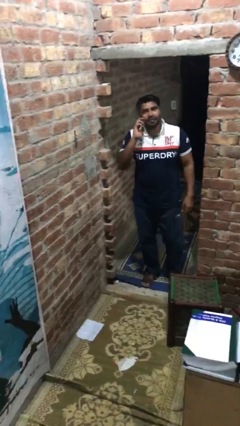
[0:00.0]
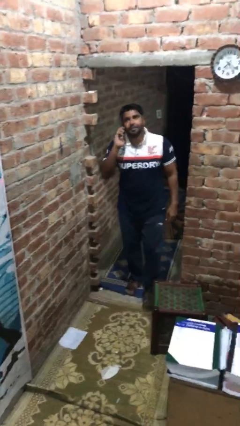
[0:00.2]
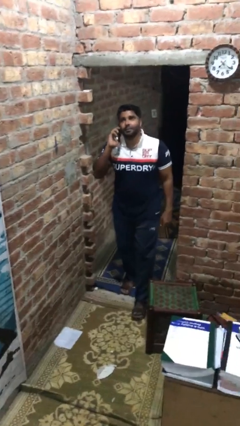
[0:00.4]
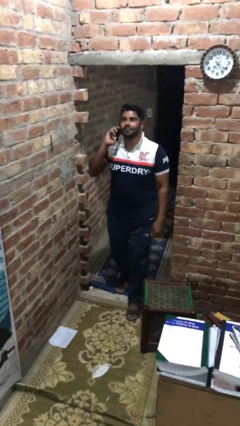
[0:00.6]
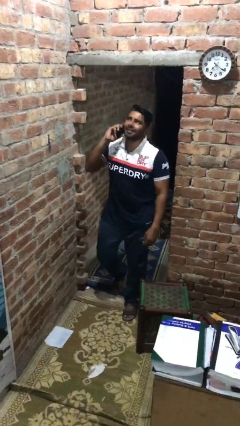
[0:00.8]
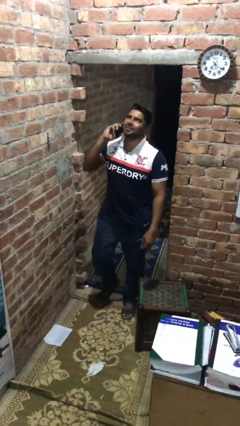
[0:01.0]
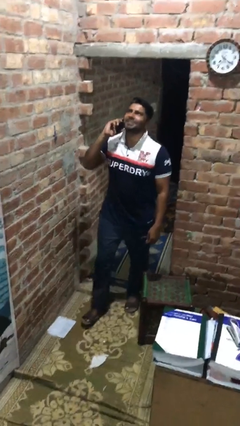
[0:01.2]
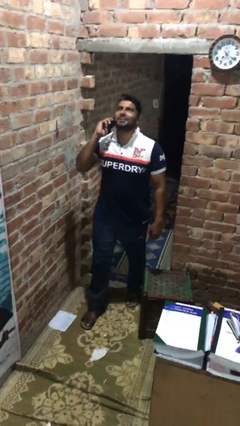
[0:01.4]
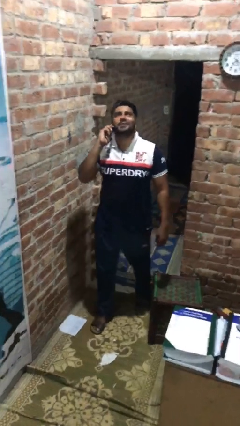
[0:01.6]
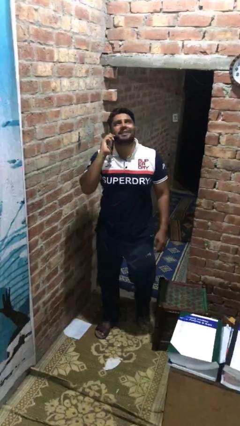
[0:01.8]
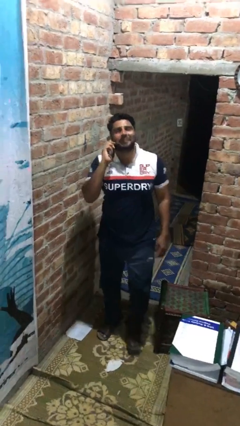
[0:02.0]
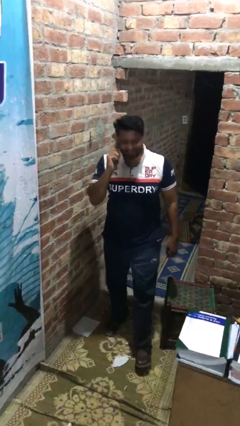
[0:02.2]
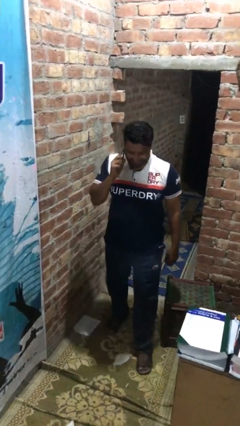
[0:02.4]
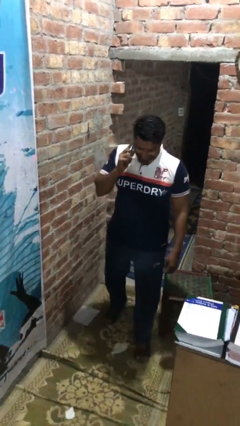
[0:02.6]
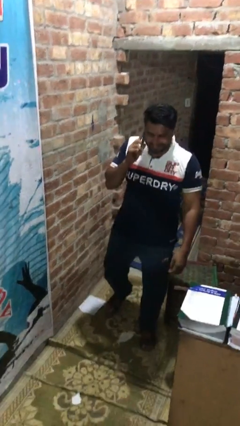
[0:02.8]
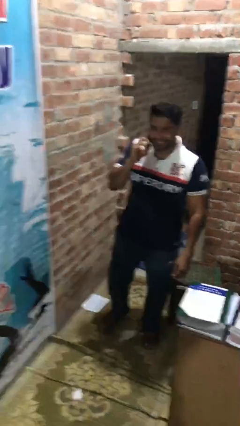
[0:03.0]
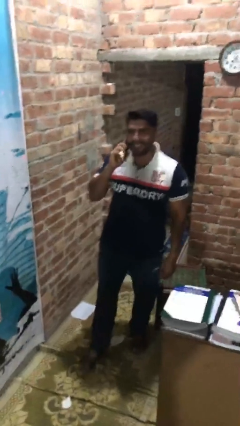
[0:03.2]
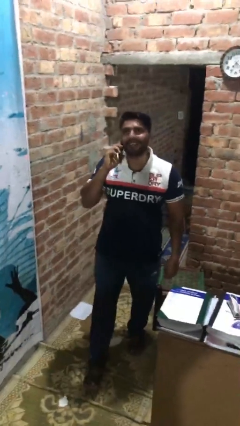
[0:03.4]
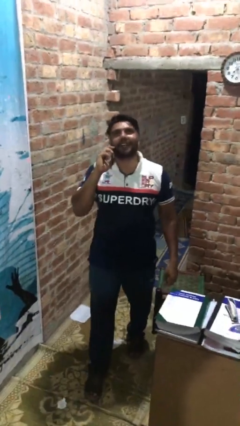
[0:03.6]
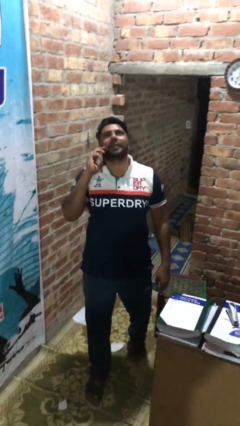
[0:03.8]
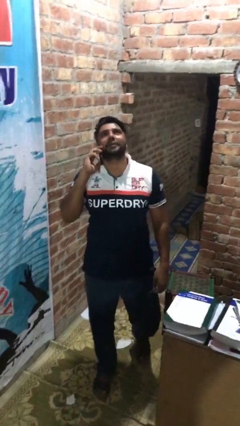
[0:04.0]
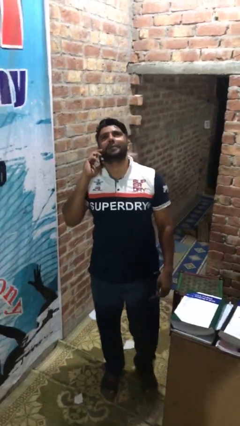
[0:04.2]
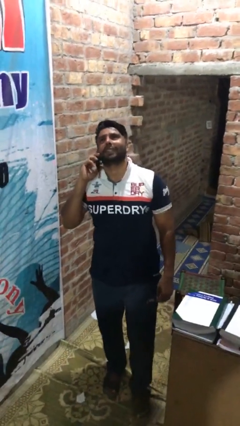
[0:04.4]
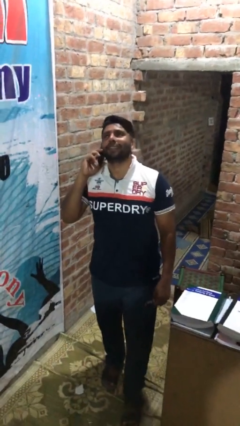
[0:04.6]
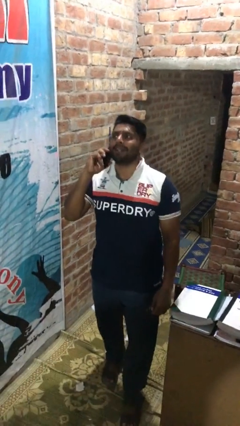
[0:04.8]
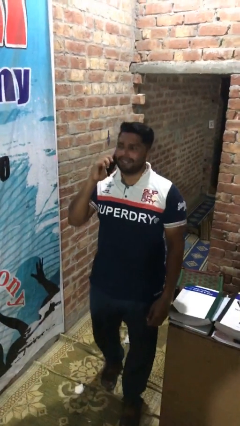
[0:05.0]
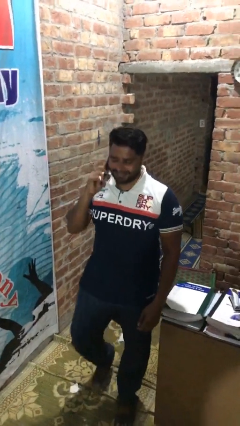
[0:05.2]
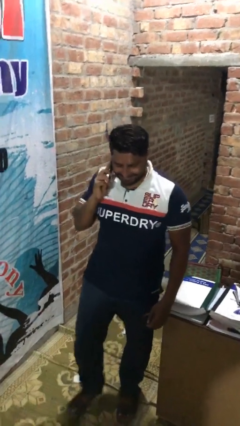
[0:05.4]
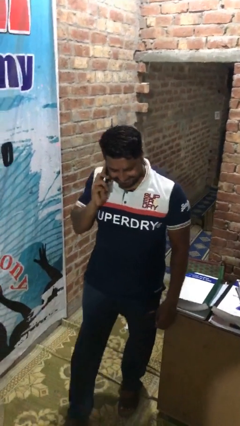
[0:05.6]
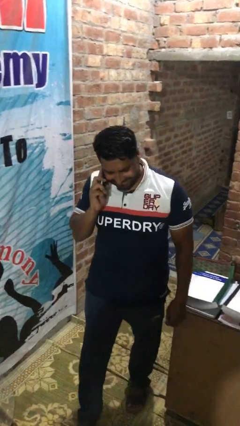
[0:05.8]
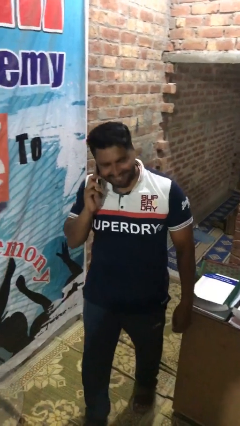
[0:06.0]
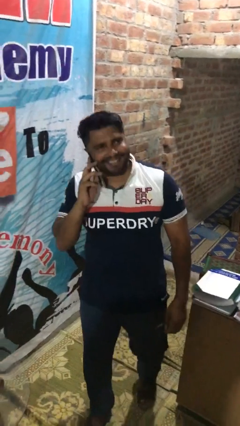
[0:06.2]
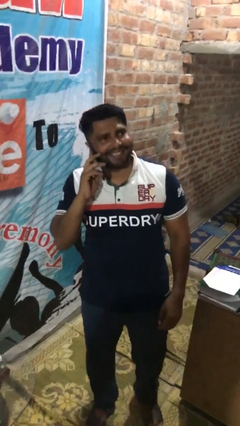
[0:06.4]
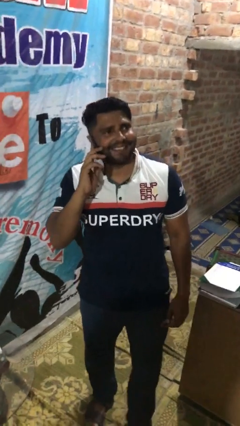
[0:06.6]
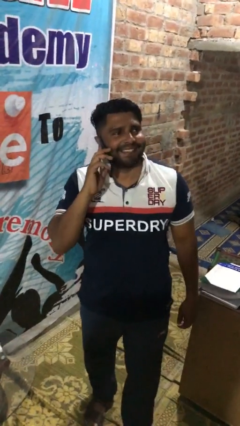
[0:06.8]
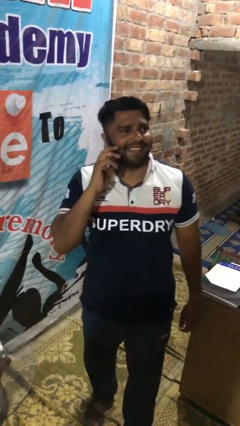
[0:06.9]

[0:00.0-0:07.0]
person talks on phone

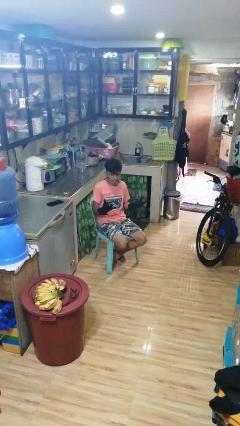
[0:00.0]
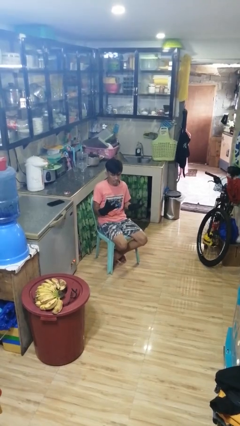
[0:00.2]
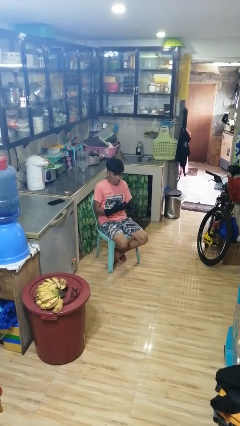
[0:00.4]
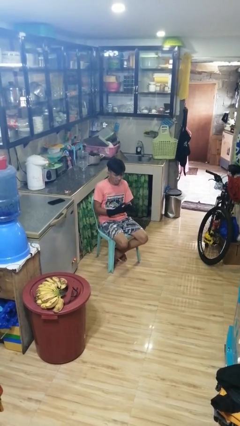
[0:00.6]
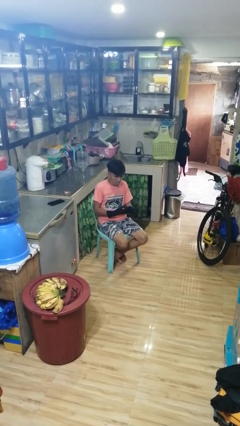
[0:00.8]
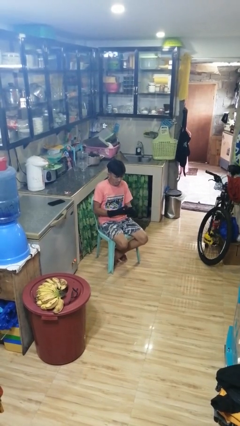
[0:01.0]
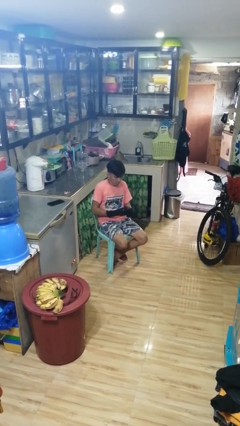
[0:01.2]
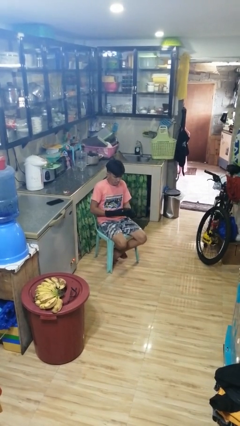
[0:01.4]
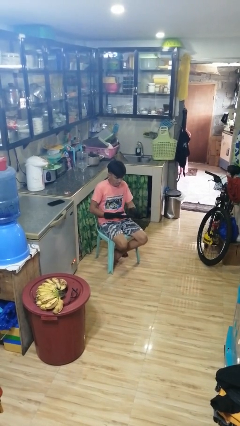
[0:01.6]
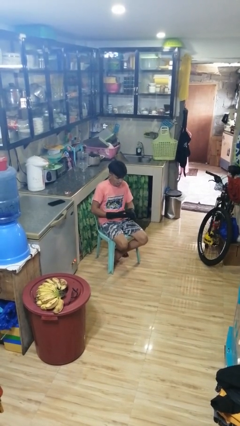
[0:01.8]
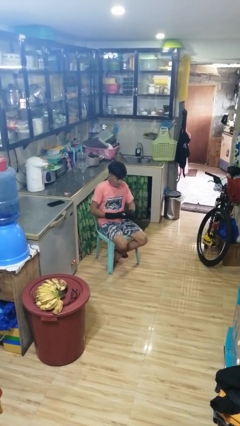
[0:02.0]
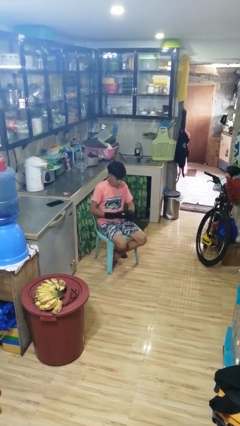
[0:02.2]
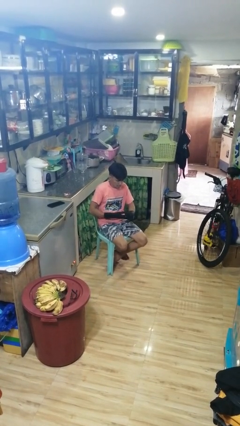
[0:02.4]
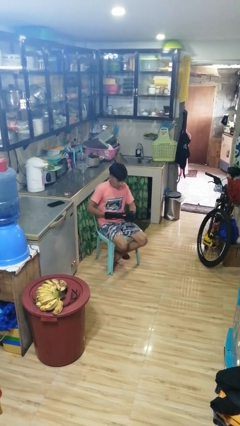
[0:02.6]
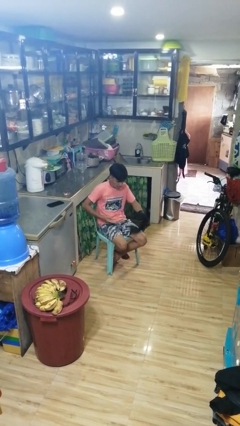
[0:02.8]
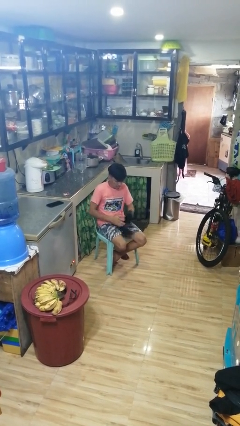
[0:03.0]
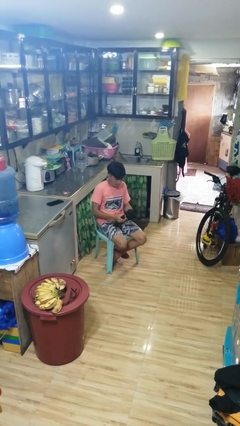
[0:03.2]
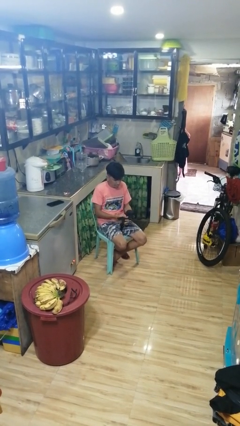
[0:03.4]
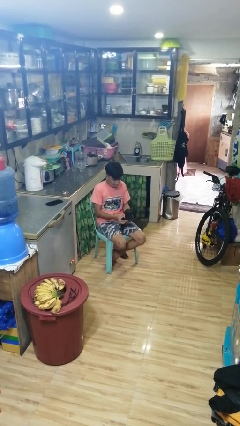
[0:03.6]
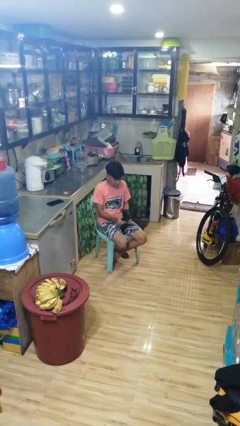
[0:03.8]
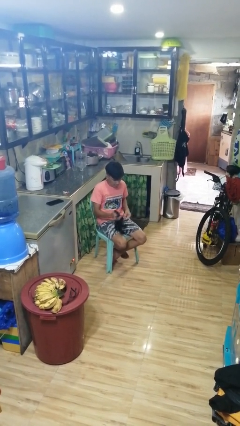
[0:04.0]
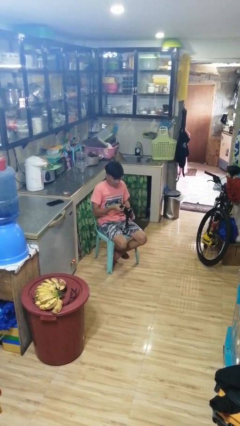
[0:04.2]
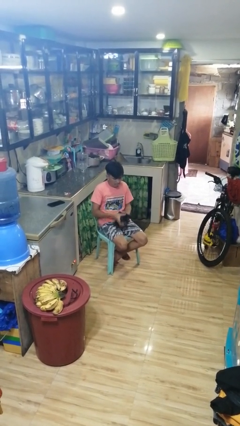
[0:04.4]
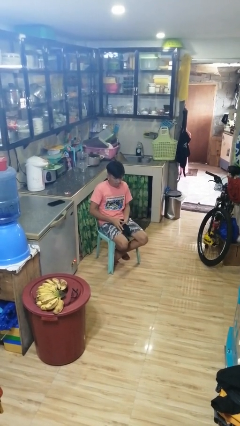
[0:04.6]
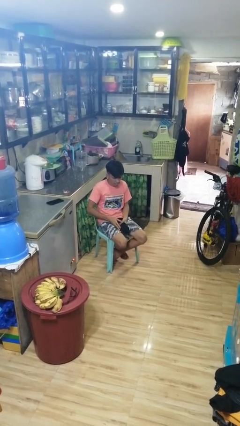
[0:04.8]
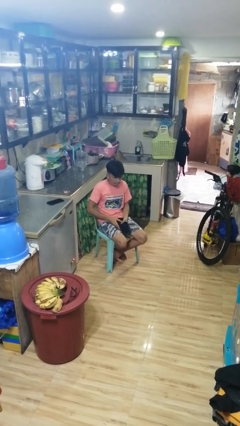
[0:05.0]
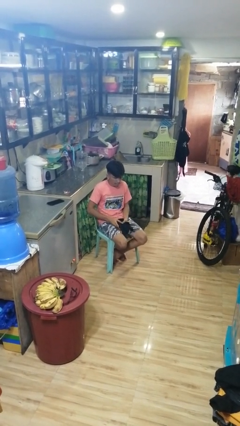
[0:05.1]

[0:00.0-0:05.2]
person takes off gloves

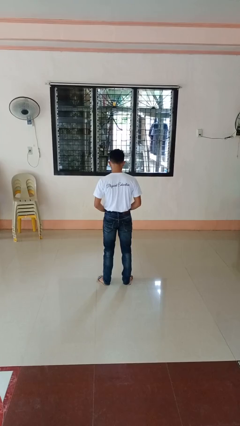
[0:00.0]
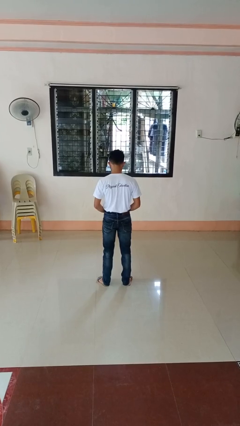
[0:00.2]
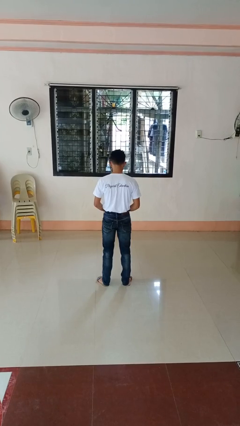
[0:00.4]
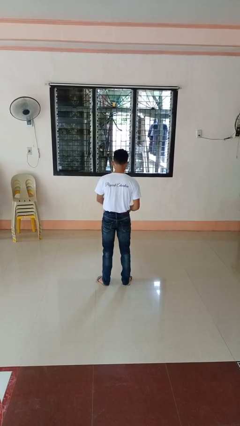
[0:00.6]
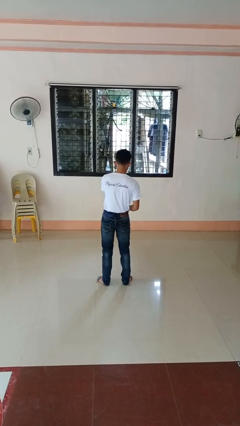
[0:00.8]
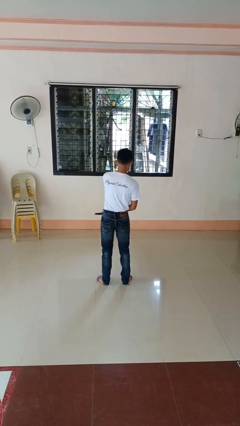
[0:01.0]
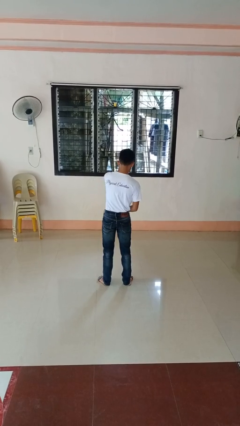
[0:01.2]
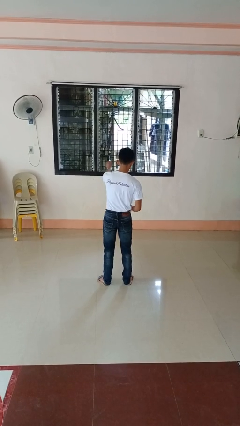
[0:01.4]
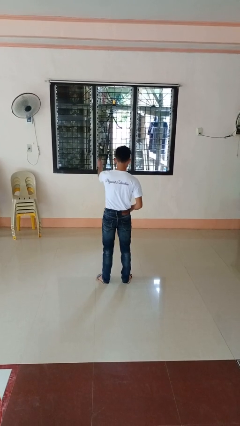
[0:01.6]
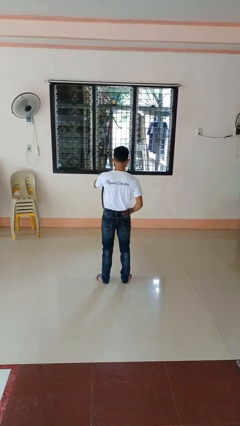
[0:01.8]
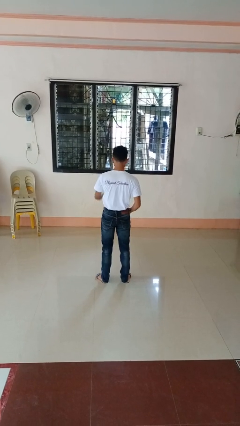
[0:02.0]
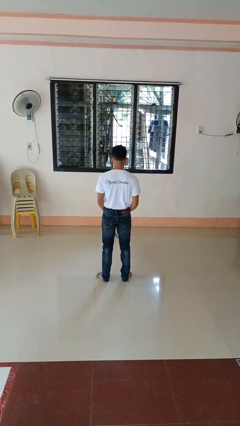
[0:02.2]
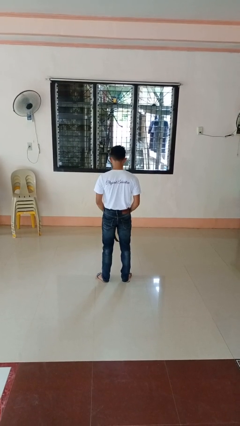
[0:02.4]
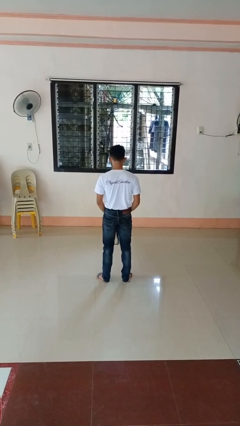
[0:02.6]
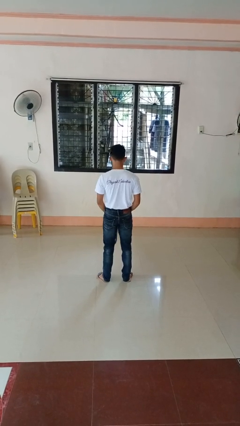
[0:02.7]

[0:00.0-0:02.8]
person takes off belt

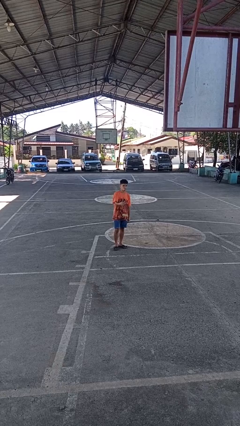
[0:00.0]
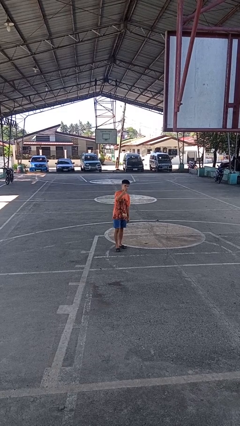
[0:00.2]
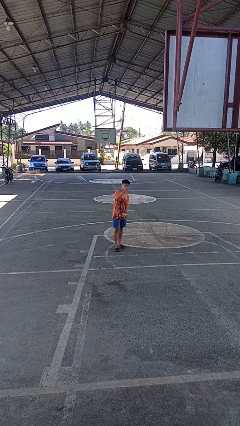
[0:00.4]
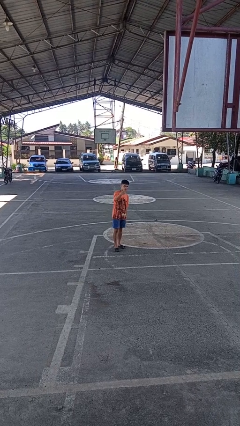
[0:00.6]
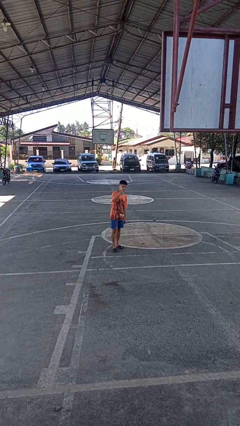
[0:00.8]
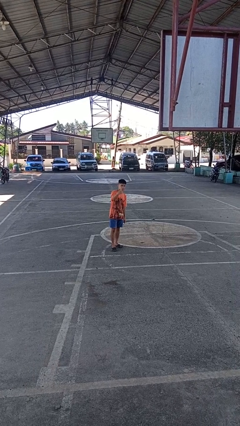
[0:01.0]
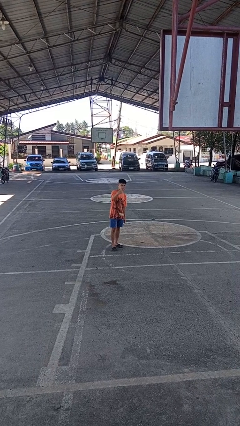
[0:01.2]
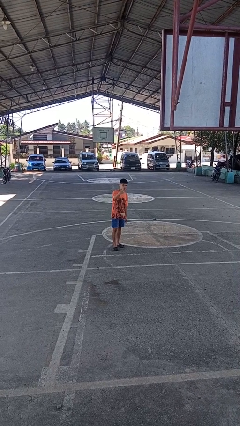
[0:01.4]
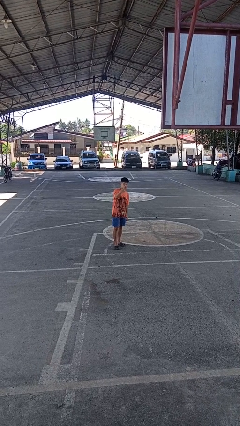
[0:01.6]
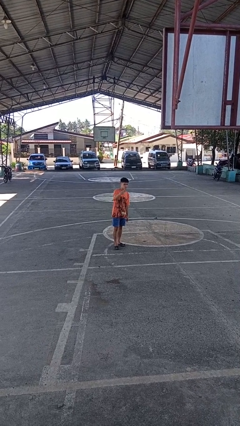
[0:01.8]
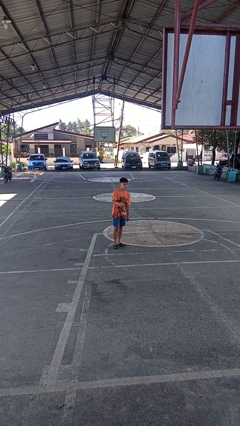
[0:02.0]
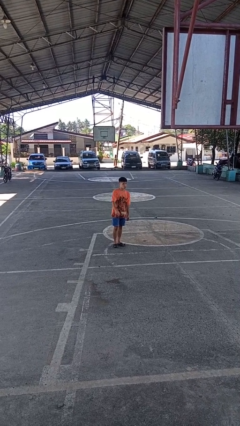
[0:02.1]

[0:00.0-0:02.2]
person gestures peace

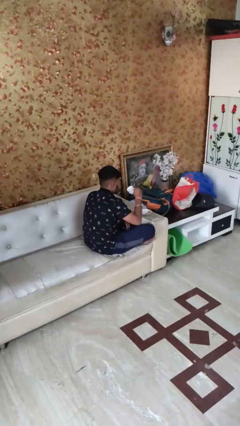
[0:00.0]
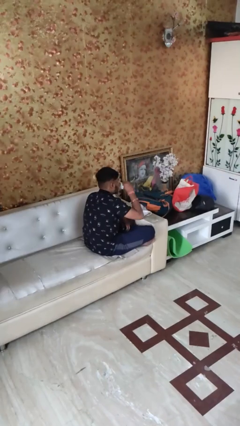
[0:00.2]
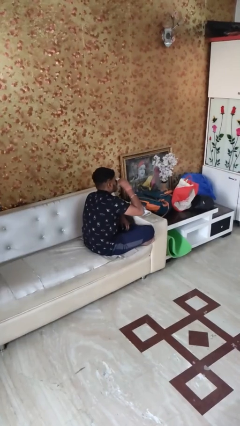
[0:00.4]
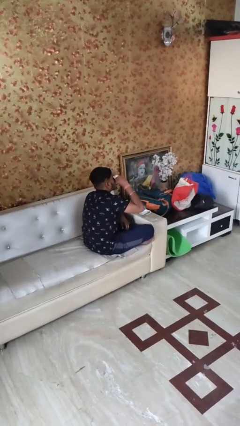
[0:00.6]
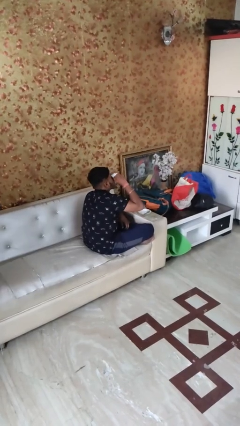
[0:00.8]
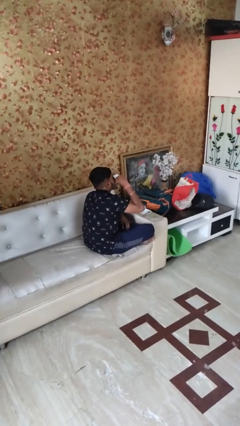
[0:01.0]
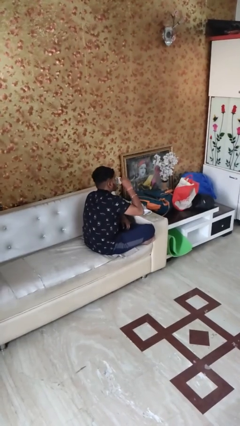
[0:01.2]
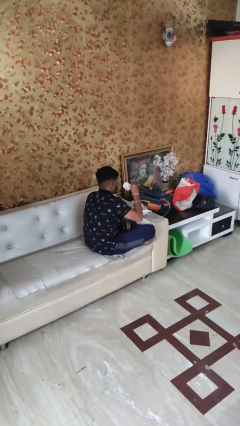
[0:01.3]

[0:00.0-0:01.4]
person drinks from mug
